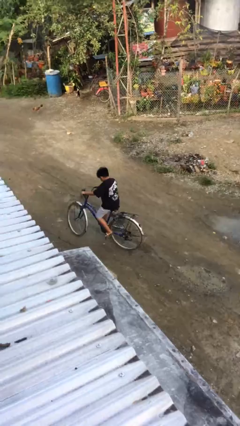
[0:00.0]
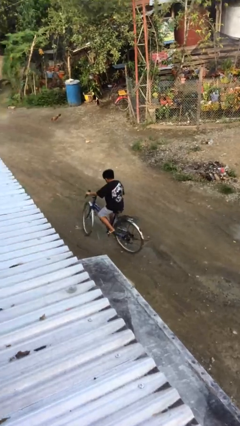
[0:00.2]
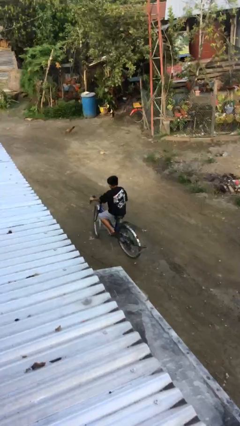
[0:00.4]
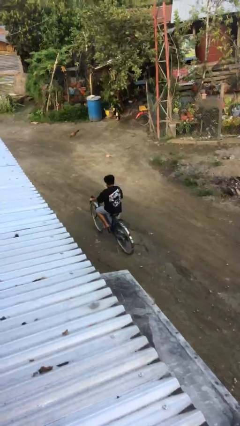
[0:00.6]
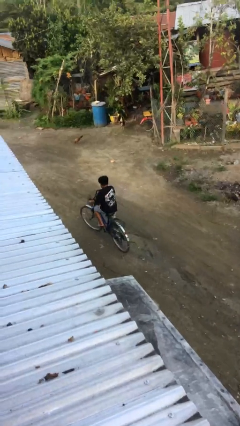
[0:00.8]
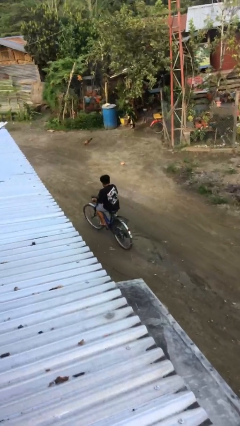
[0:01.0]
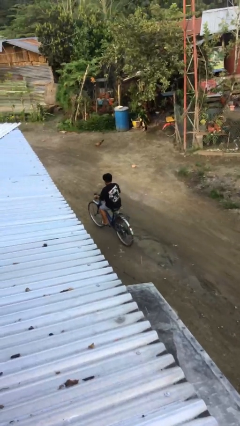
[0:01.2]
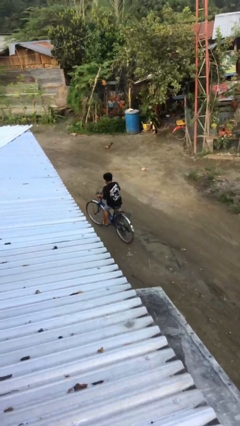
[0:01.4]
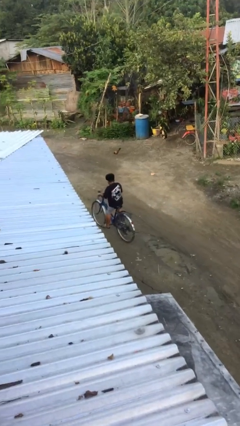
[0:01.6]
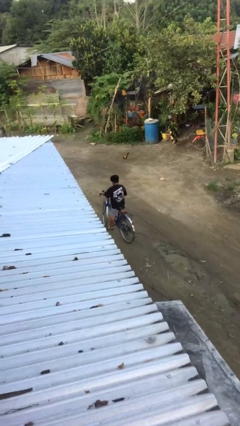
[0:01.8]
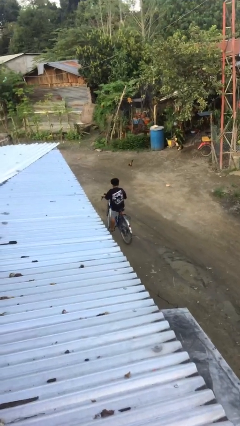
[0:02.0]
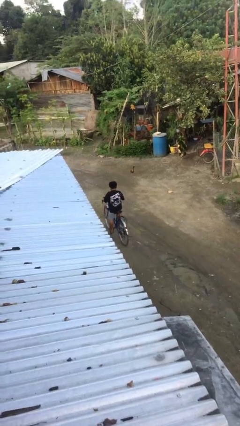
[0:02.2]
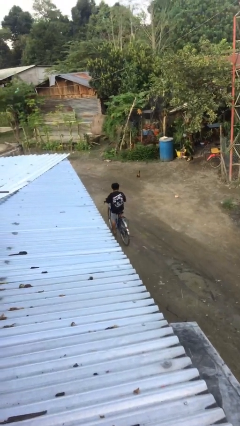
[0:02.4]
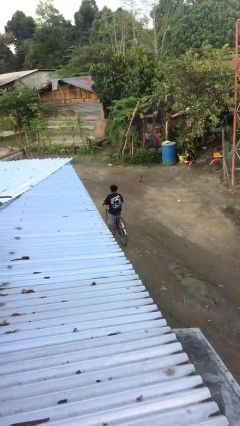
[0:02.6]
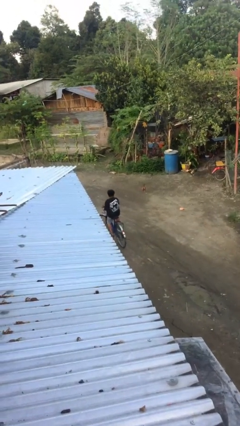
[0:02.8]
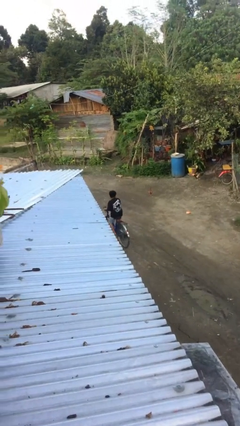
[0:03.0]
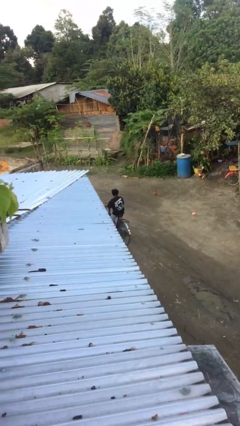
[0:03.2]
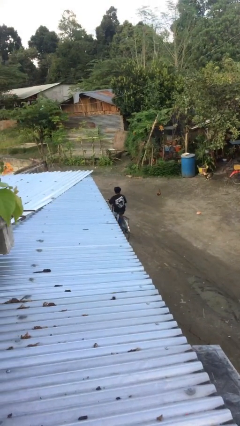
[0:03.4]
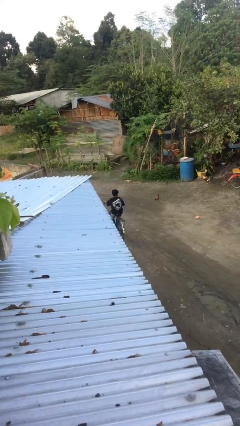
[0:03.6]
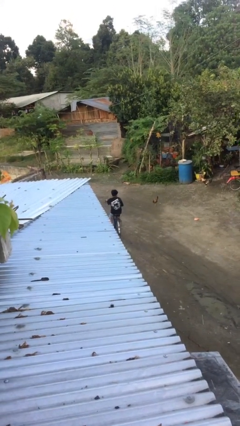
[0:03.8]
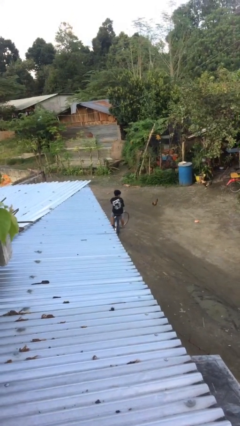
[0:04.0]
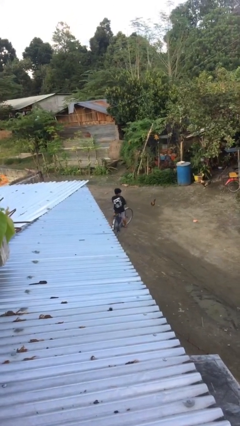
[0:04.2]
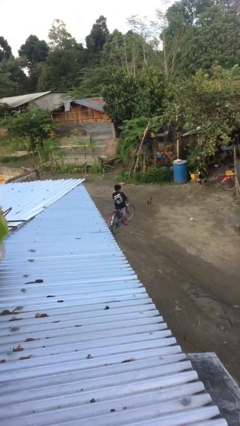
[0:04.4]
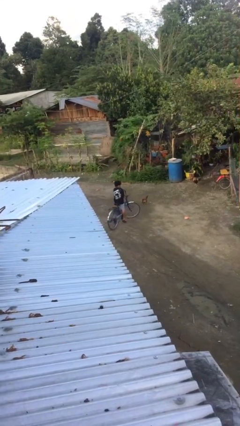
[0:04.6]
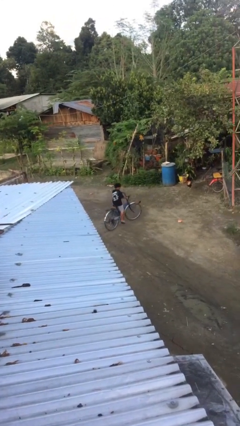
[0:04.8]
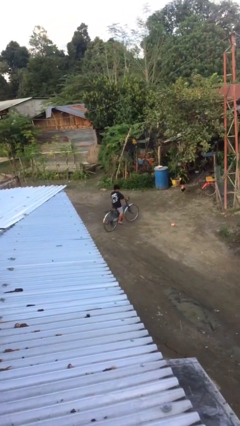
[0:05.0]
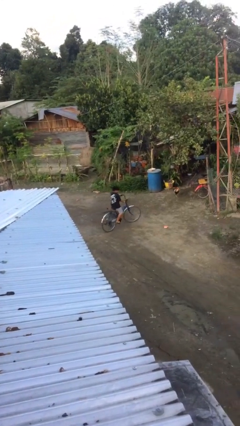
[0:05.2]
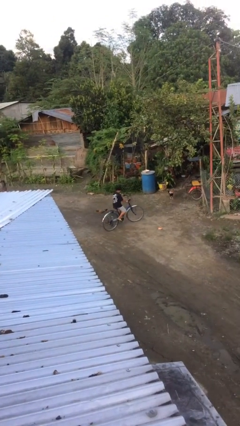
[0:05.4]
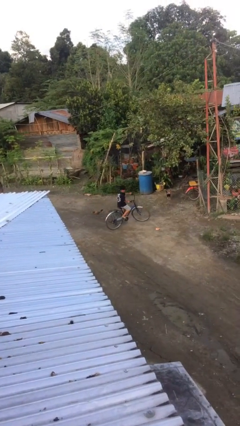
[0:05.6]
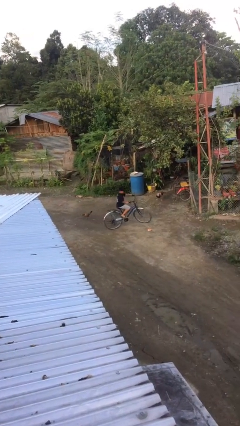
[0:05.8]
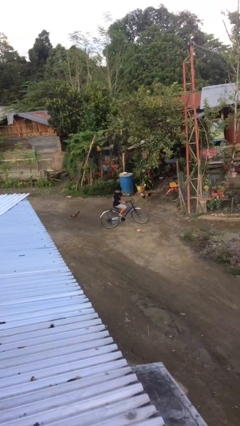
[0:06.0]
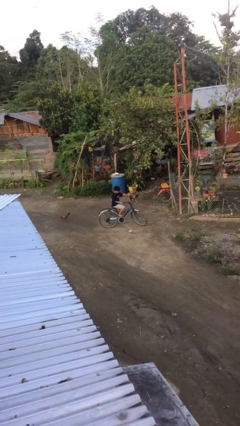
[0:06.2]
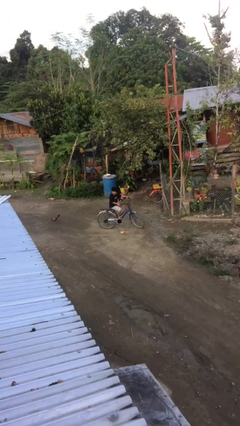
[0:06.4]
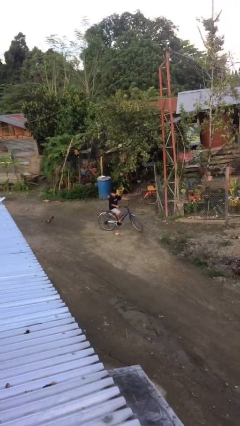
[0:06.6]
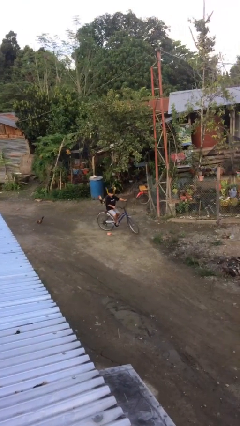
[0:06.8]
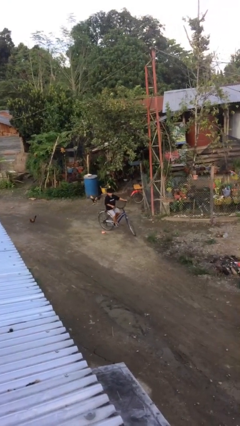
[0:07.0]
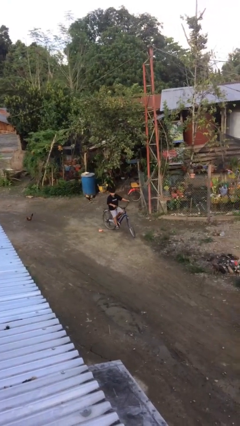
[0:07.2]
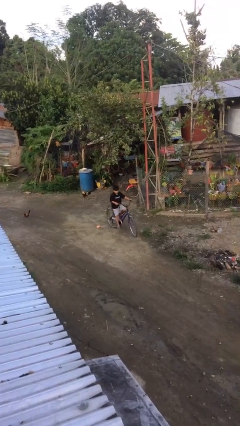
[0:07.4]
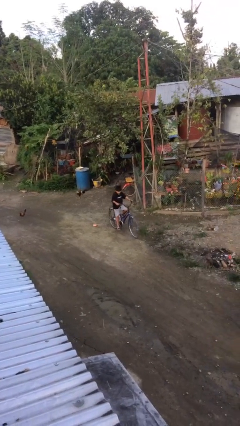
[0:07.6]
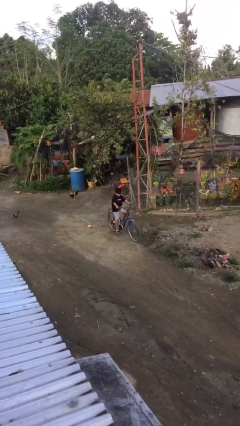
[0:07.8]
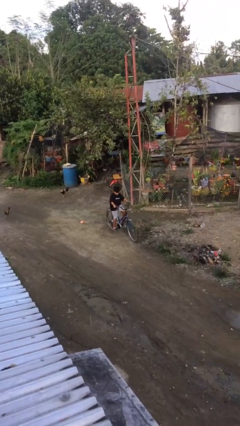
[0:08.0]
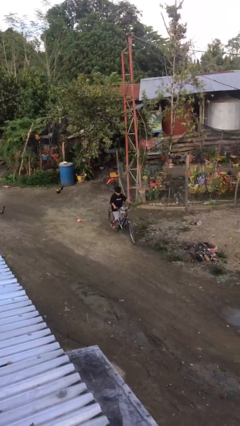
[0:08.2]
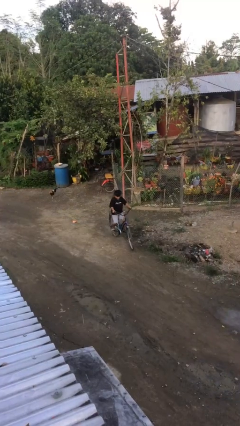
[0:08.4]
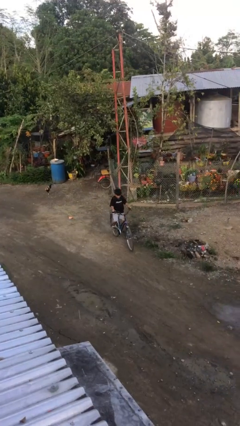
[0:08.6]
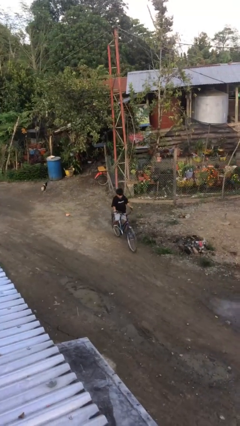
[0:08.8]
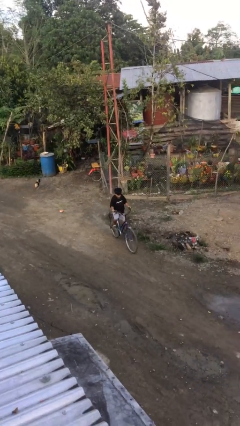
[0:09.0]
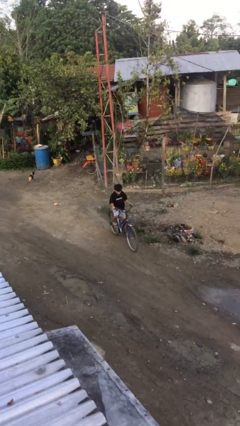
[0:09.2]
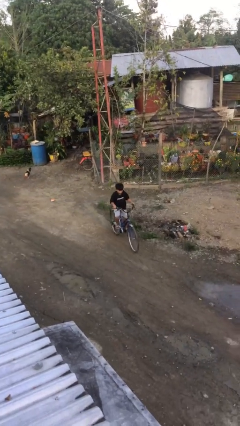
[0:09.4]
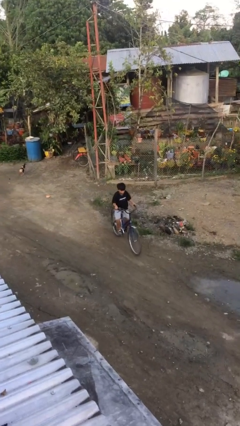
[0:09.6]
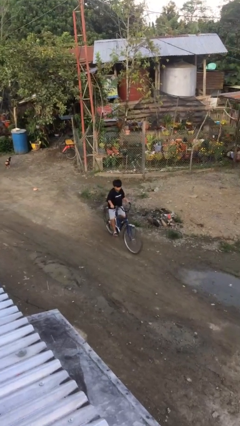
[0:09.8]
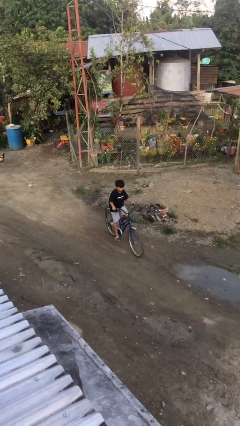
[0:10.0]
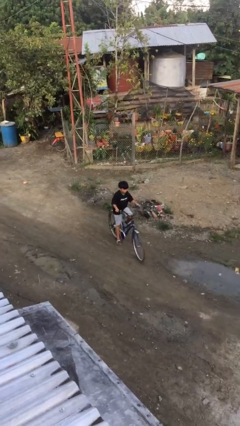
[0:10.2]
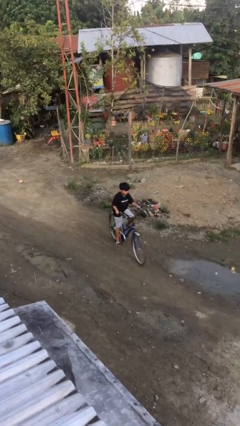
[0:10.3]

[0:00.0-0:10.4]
person rides bicycle

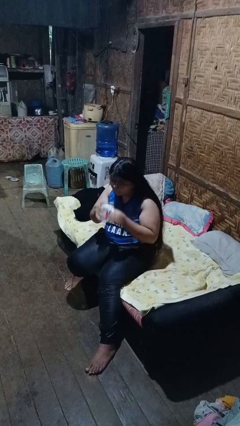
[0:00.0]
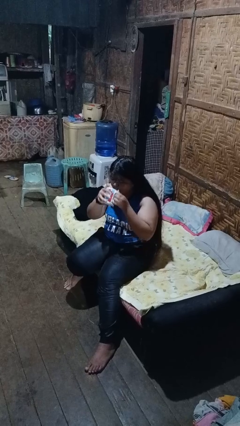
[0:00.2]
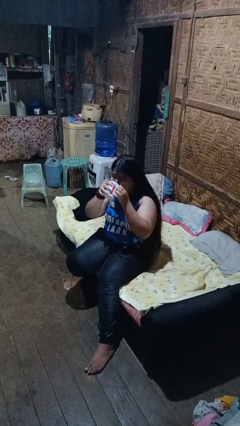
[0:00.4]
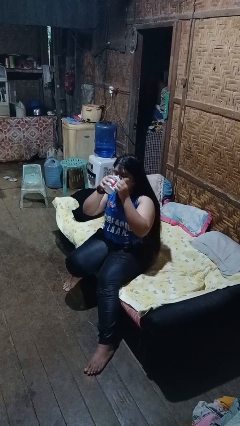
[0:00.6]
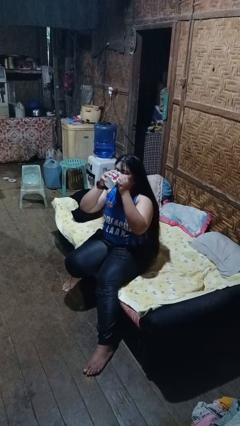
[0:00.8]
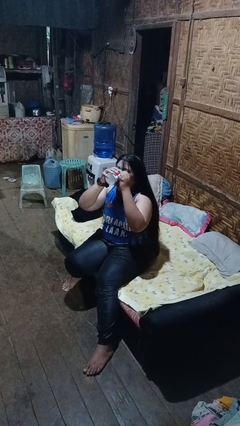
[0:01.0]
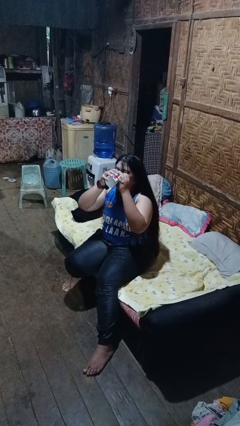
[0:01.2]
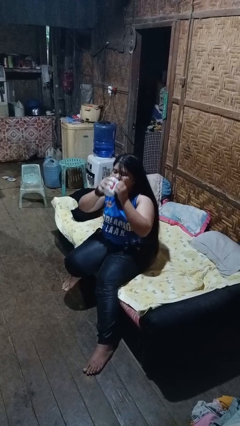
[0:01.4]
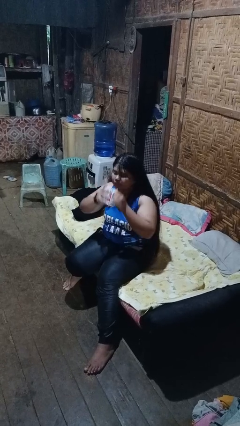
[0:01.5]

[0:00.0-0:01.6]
person drinks from mug

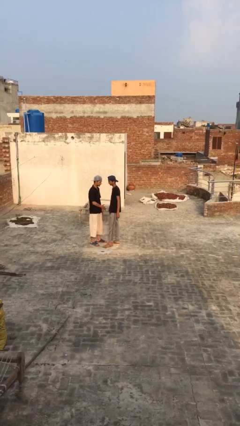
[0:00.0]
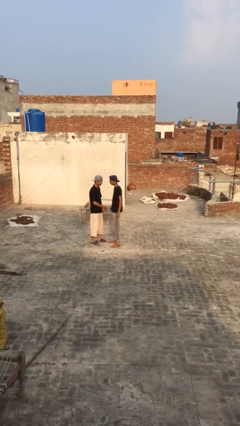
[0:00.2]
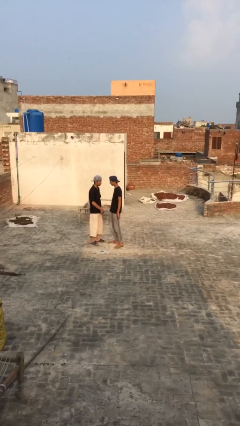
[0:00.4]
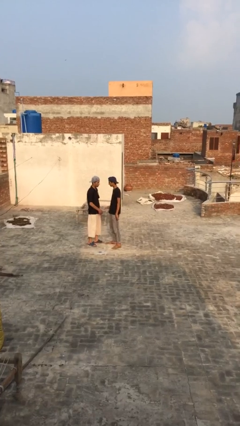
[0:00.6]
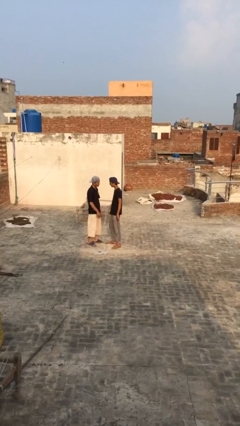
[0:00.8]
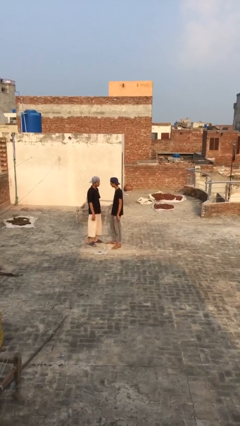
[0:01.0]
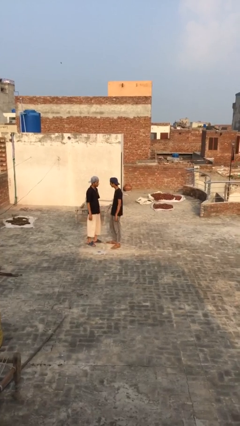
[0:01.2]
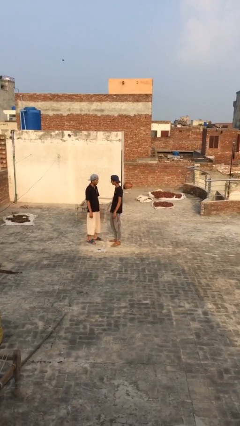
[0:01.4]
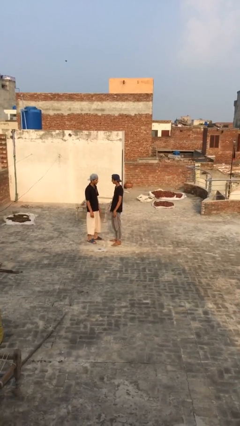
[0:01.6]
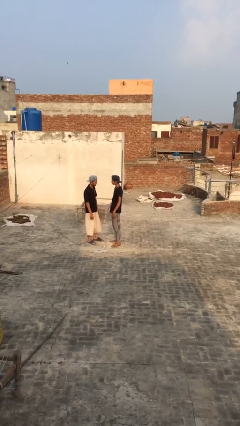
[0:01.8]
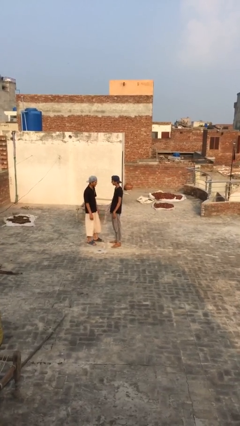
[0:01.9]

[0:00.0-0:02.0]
person talks to person

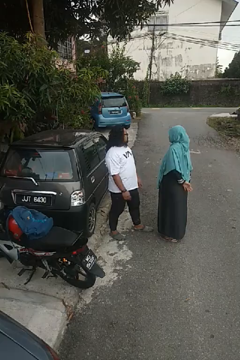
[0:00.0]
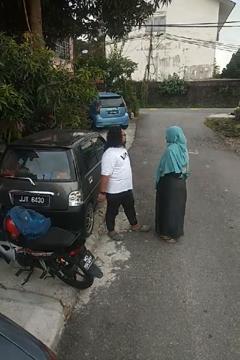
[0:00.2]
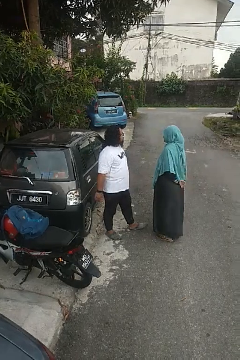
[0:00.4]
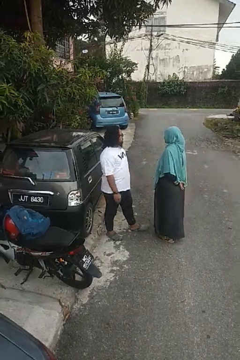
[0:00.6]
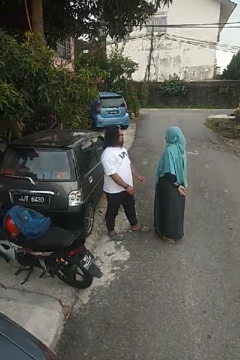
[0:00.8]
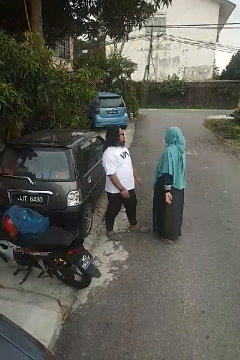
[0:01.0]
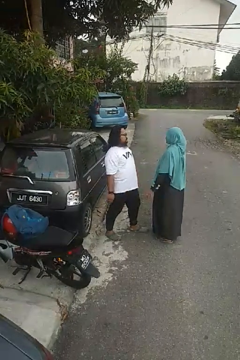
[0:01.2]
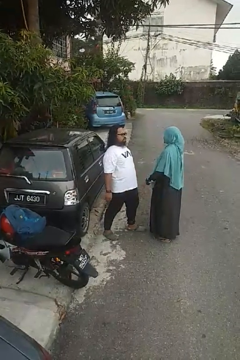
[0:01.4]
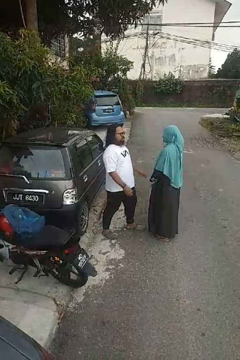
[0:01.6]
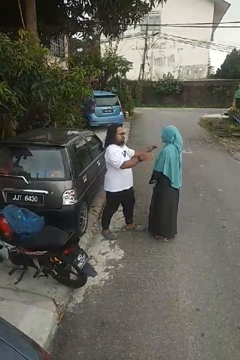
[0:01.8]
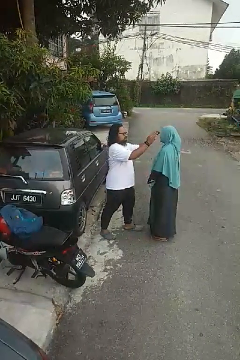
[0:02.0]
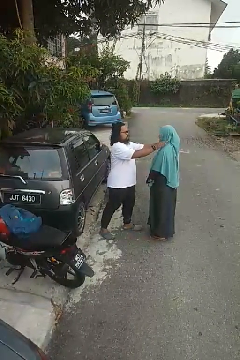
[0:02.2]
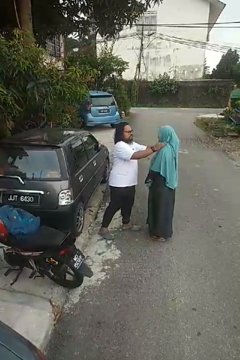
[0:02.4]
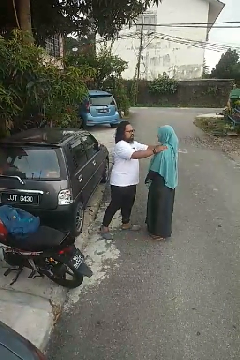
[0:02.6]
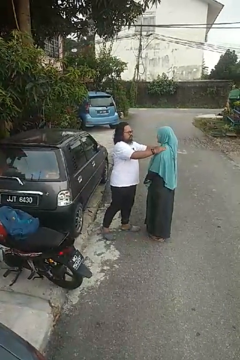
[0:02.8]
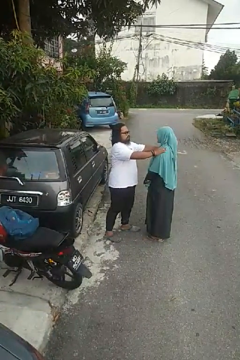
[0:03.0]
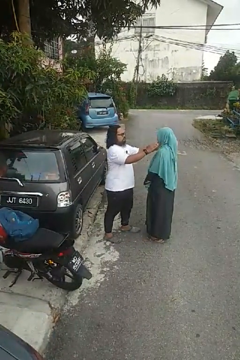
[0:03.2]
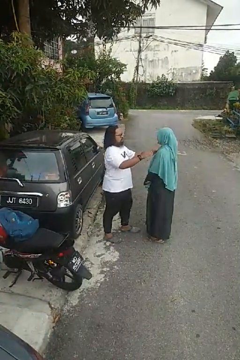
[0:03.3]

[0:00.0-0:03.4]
person pounds shoulders of person

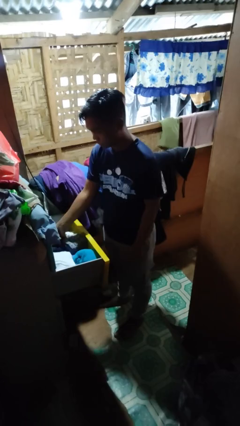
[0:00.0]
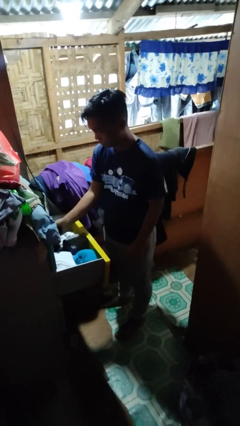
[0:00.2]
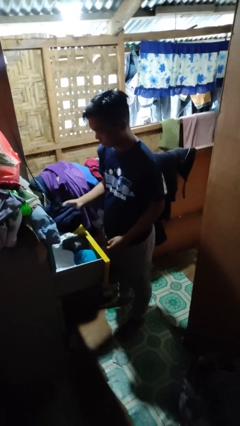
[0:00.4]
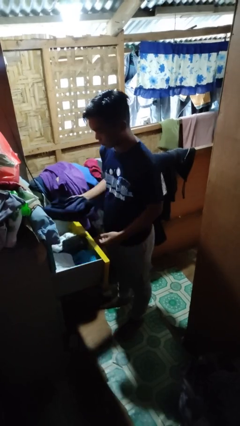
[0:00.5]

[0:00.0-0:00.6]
person takes clothes from dresser
